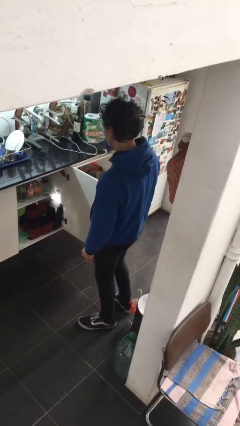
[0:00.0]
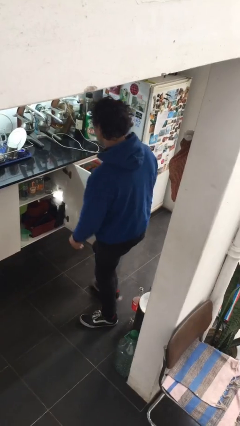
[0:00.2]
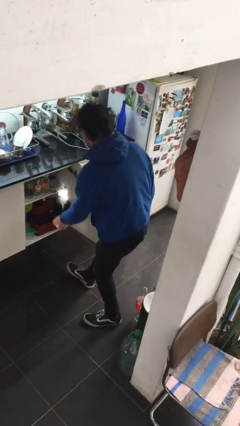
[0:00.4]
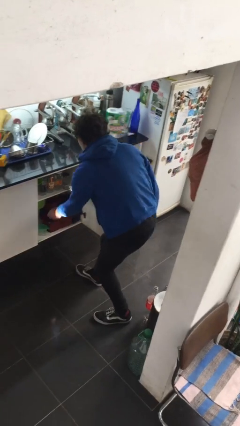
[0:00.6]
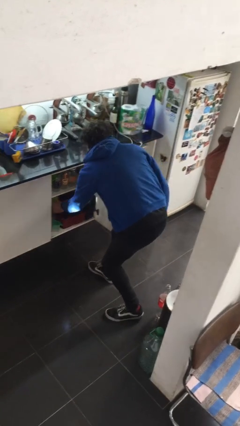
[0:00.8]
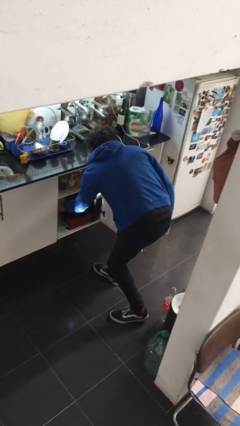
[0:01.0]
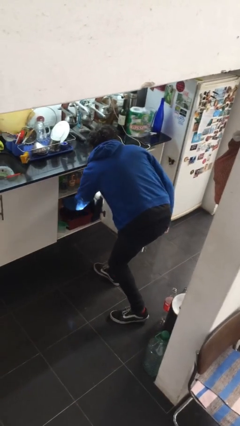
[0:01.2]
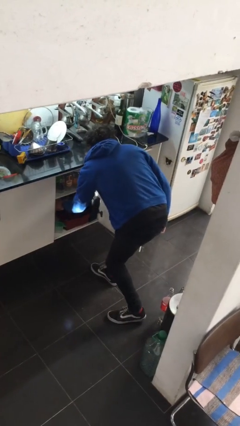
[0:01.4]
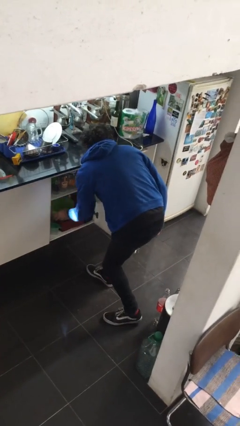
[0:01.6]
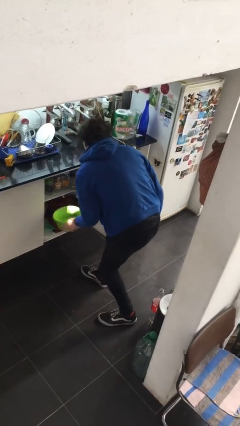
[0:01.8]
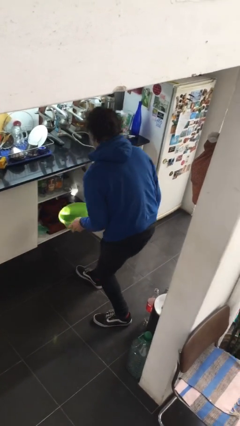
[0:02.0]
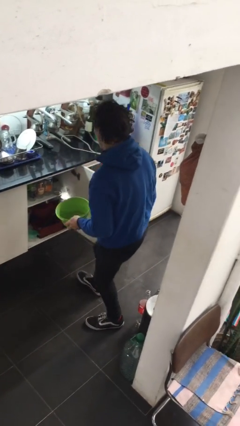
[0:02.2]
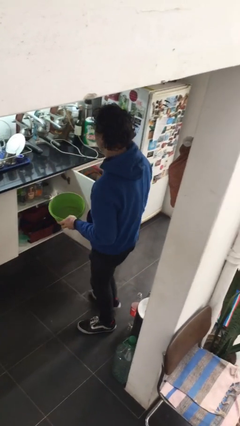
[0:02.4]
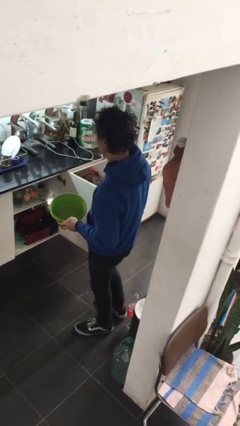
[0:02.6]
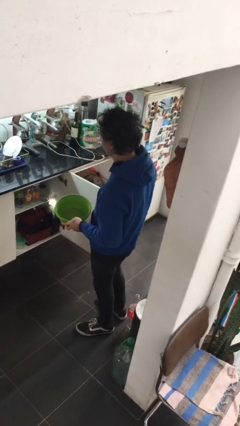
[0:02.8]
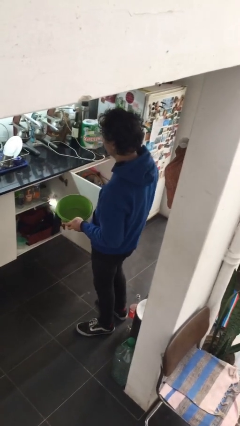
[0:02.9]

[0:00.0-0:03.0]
person picks up object from cabinet

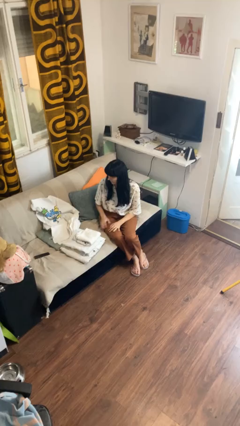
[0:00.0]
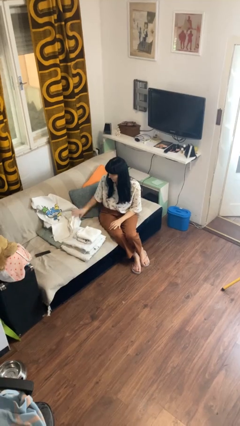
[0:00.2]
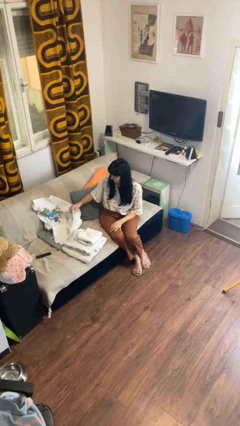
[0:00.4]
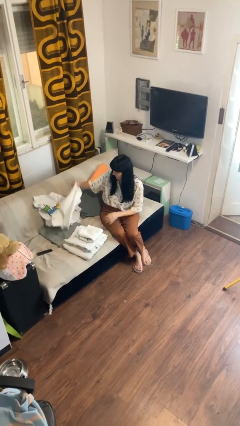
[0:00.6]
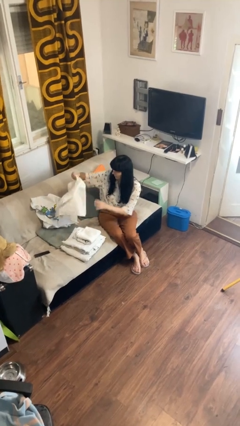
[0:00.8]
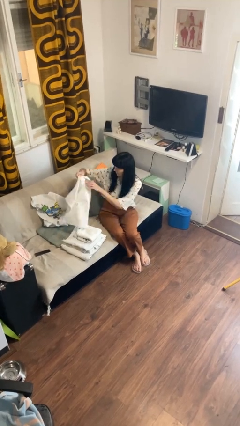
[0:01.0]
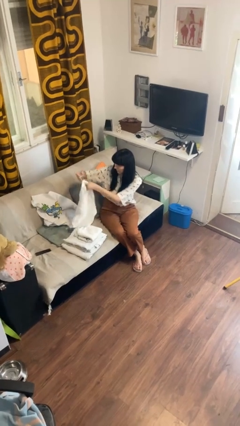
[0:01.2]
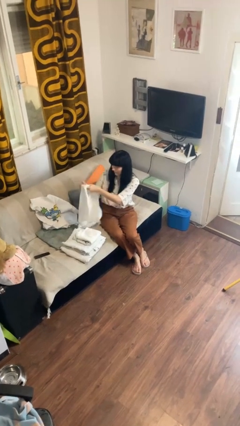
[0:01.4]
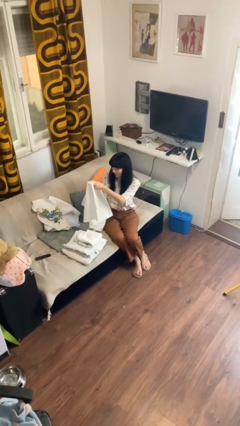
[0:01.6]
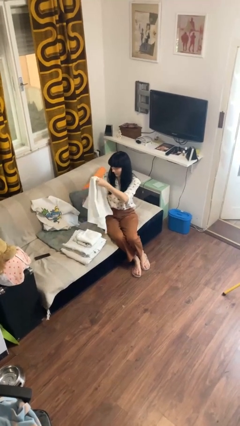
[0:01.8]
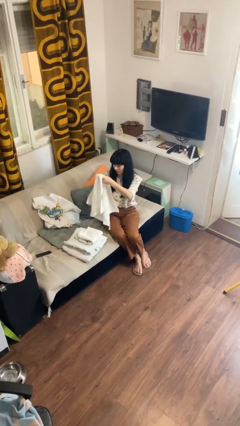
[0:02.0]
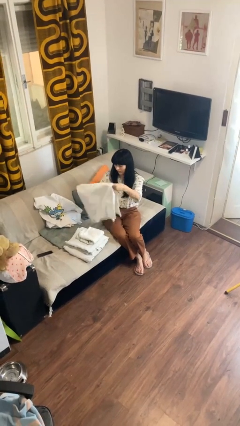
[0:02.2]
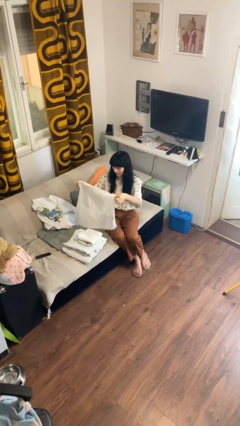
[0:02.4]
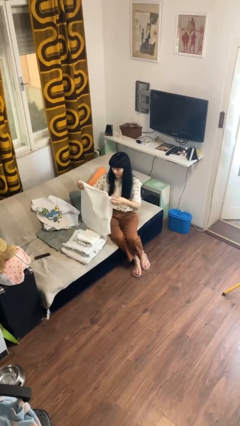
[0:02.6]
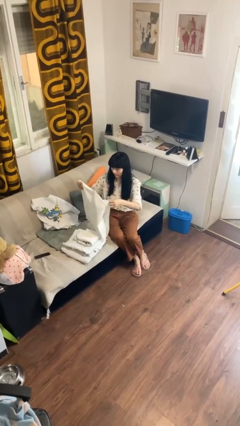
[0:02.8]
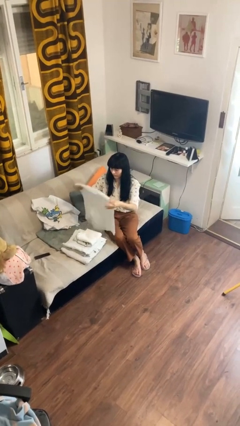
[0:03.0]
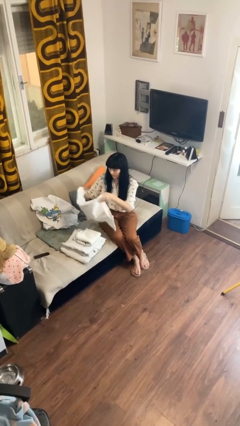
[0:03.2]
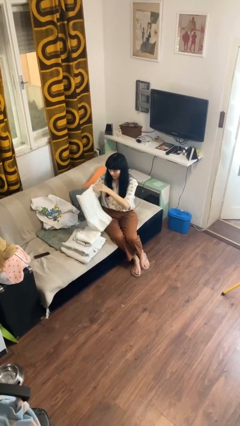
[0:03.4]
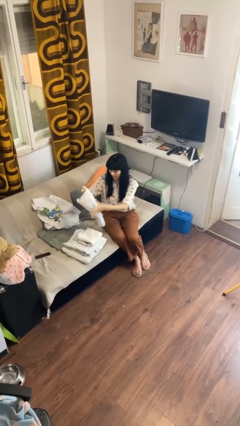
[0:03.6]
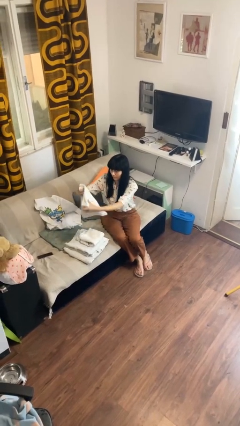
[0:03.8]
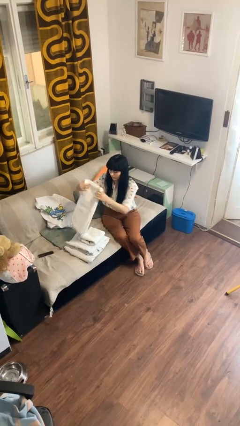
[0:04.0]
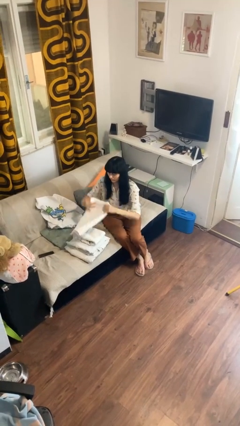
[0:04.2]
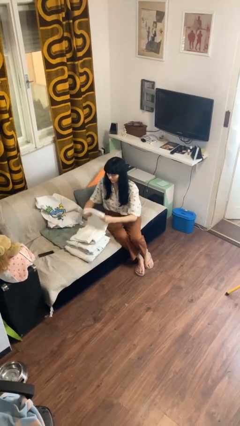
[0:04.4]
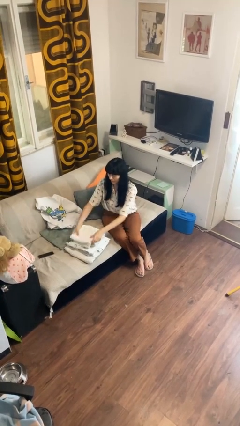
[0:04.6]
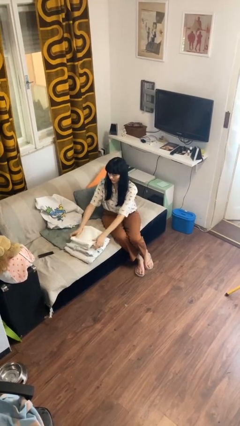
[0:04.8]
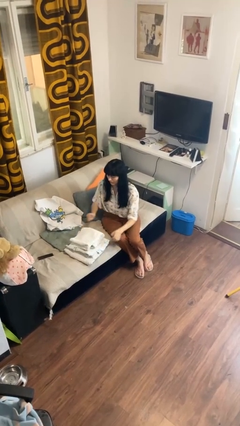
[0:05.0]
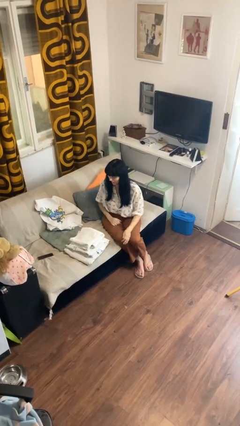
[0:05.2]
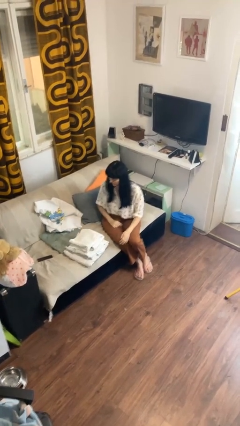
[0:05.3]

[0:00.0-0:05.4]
person folds towel

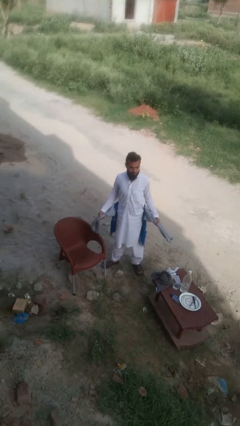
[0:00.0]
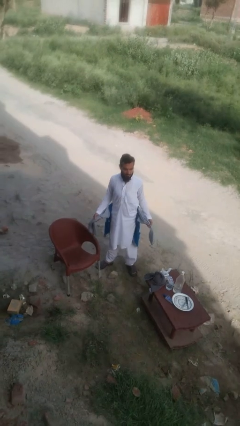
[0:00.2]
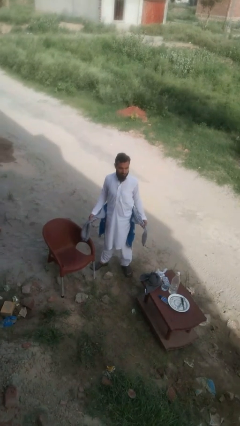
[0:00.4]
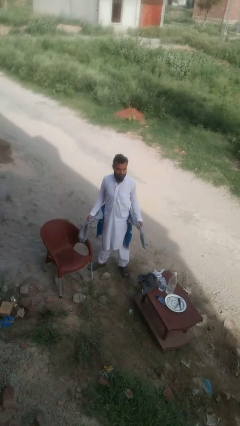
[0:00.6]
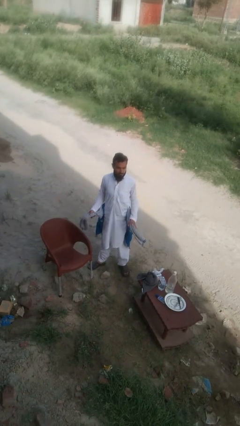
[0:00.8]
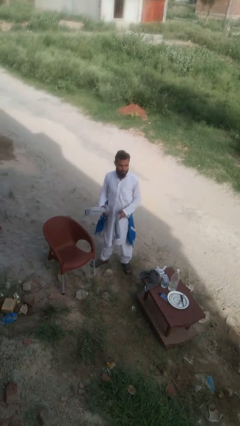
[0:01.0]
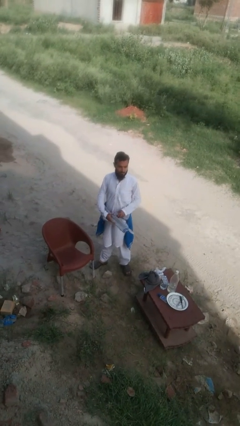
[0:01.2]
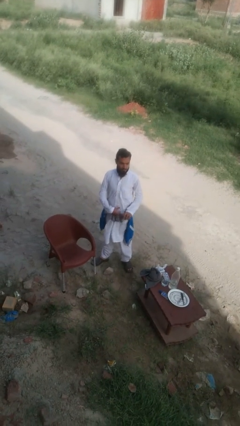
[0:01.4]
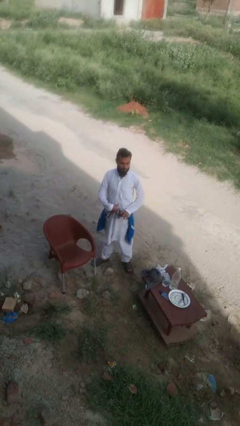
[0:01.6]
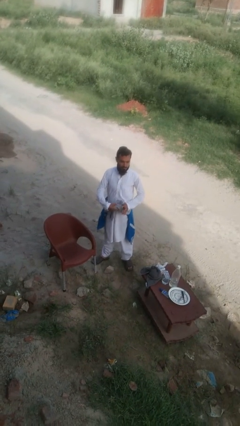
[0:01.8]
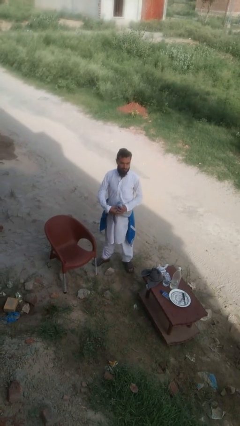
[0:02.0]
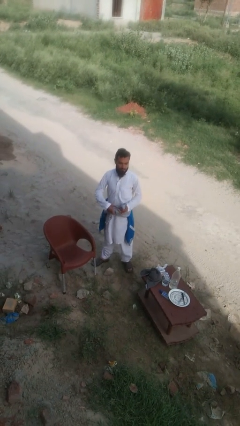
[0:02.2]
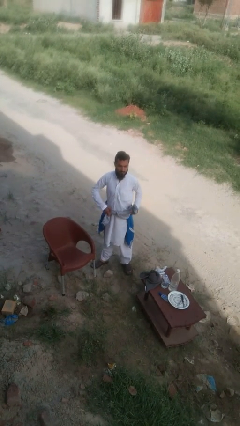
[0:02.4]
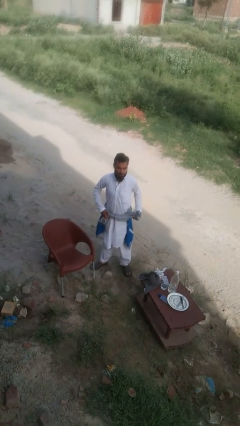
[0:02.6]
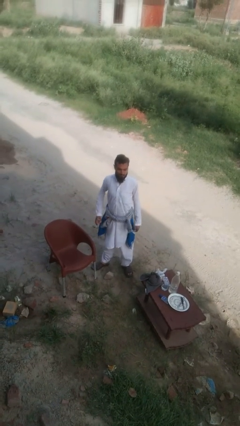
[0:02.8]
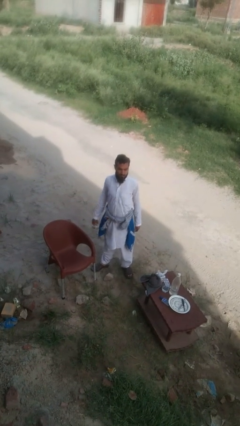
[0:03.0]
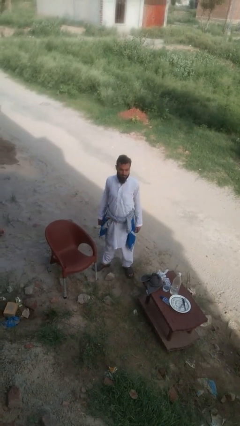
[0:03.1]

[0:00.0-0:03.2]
person ties jacket around waist

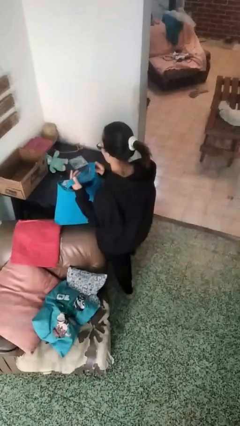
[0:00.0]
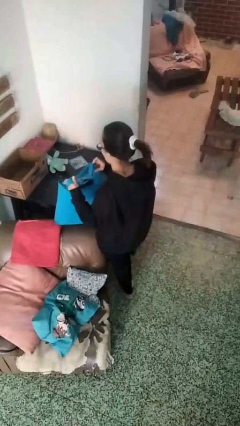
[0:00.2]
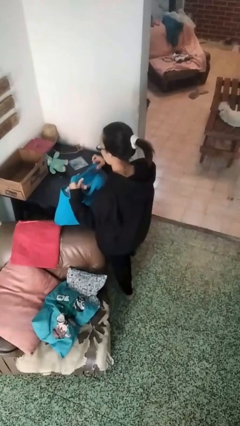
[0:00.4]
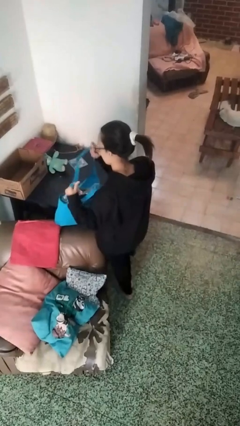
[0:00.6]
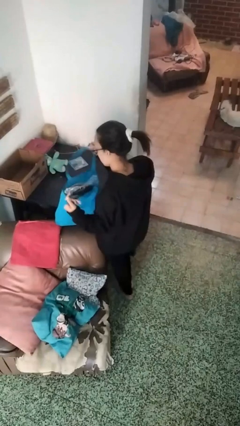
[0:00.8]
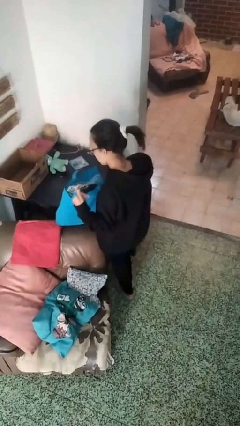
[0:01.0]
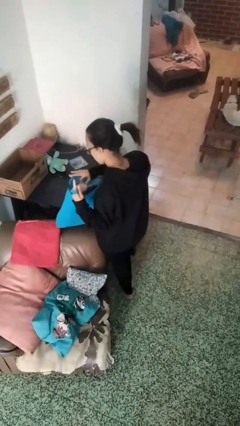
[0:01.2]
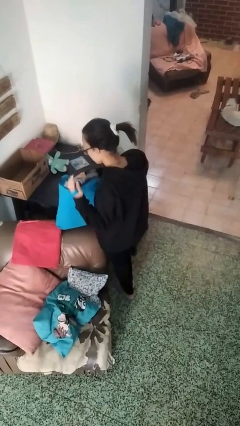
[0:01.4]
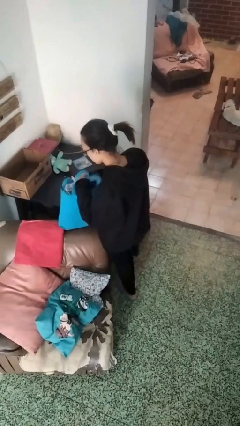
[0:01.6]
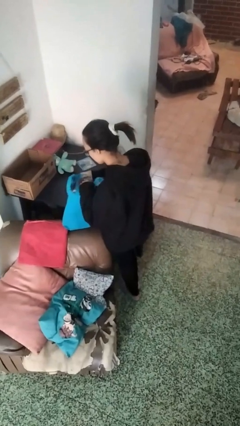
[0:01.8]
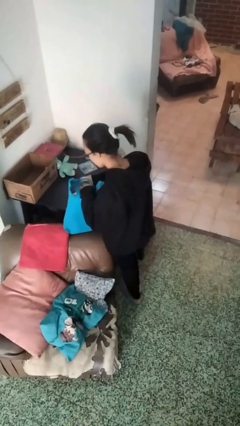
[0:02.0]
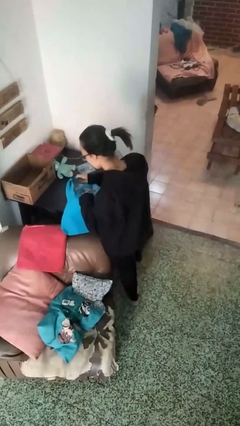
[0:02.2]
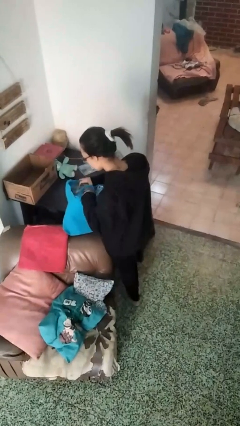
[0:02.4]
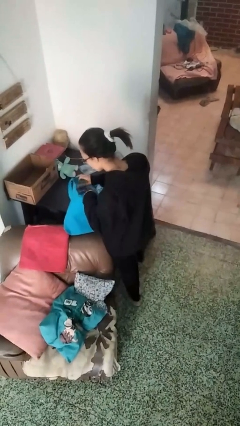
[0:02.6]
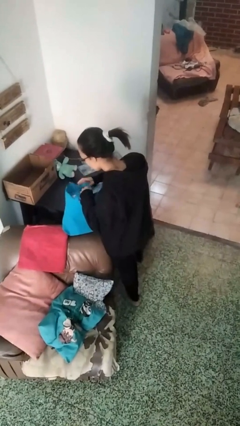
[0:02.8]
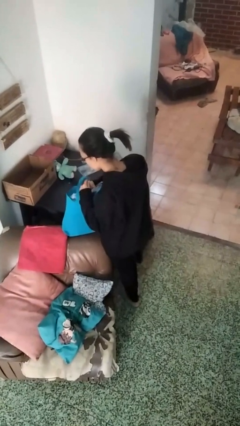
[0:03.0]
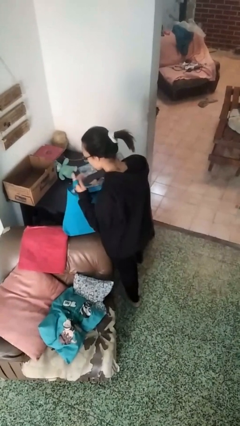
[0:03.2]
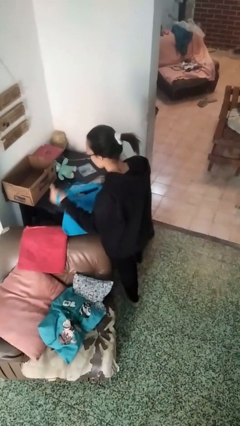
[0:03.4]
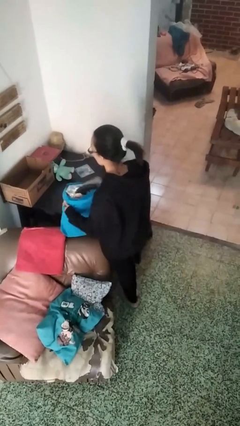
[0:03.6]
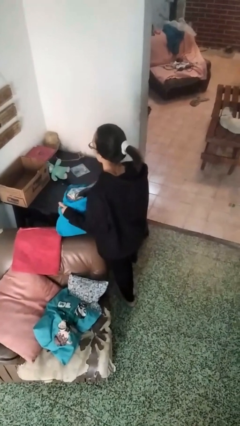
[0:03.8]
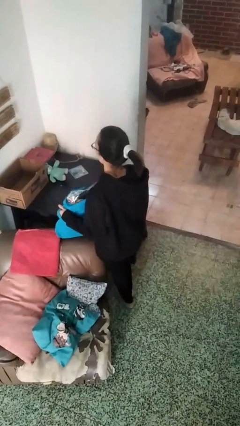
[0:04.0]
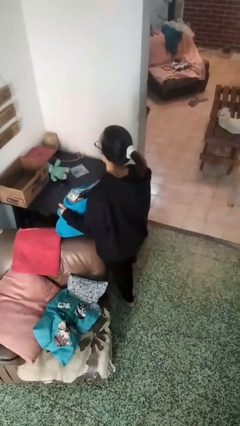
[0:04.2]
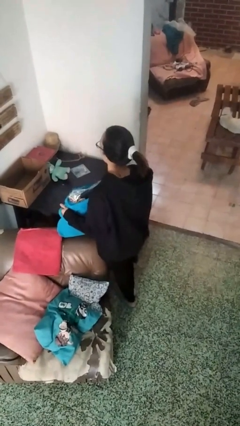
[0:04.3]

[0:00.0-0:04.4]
person searches in bag

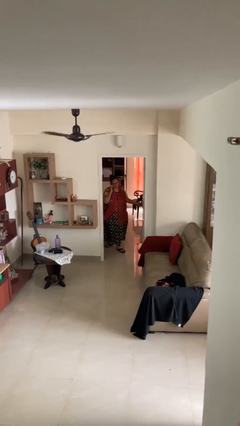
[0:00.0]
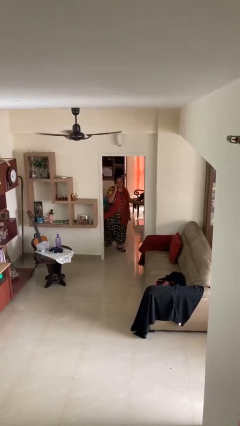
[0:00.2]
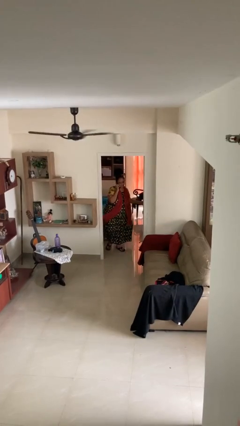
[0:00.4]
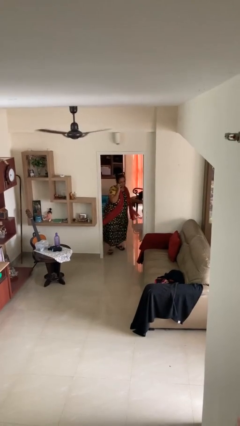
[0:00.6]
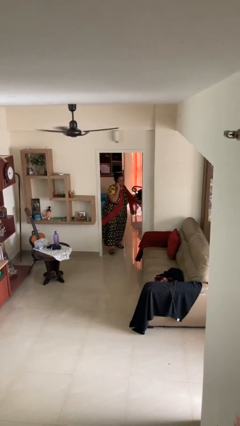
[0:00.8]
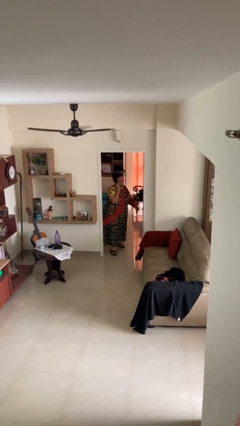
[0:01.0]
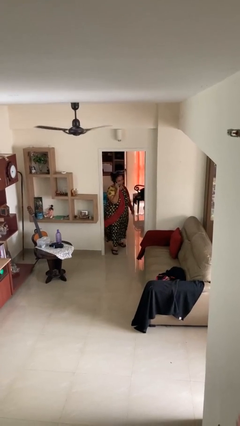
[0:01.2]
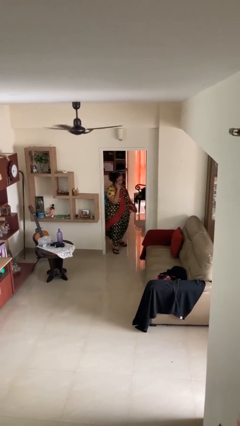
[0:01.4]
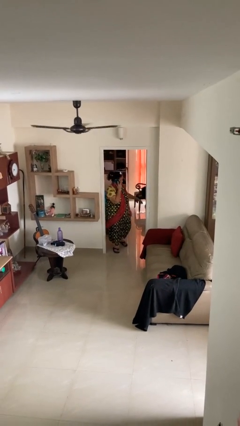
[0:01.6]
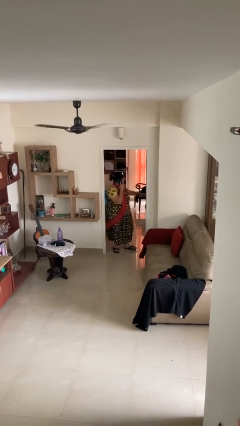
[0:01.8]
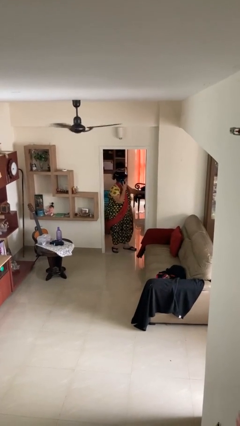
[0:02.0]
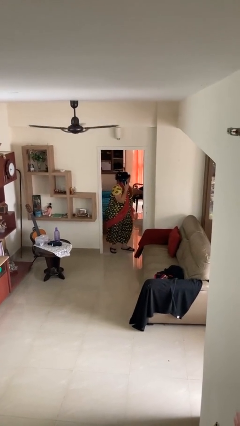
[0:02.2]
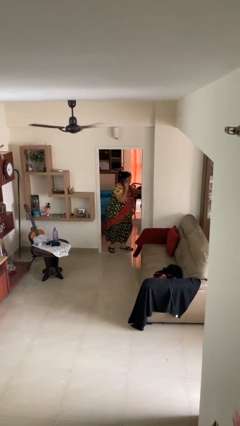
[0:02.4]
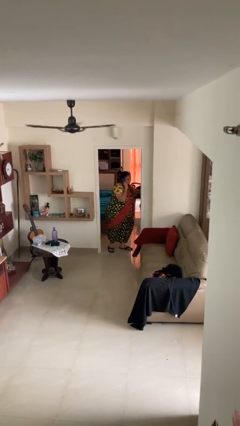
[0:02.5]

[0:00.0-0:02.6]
person enters scene through structure
